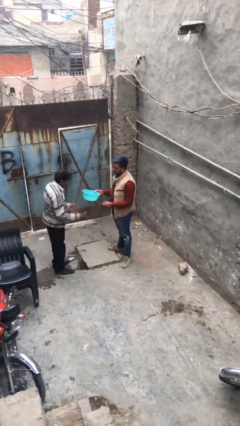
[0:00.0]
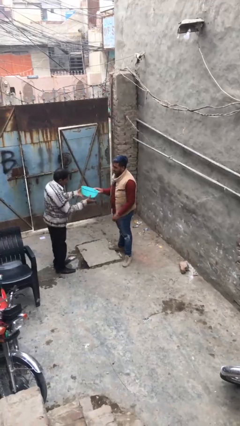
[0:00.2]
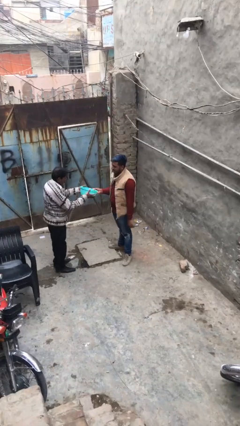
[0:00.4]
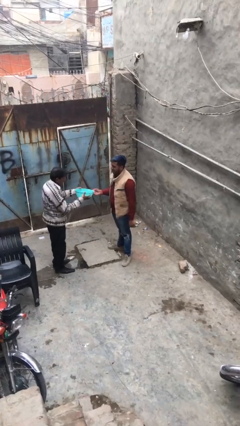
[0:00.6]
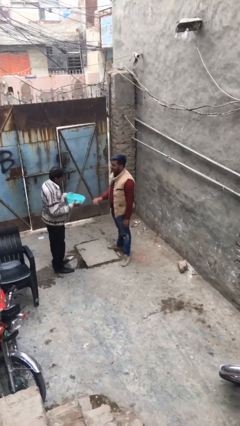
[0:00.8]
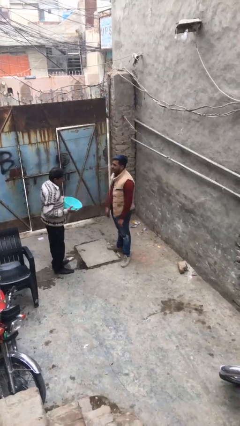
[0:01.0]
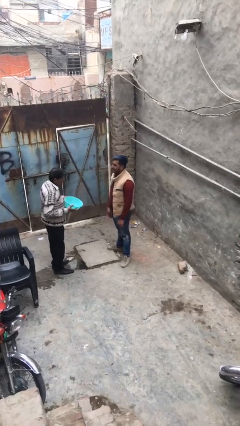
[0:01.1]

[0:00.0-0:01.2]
person transfers object to person

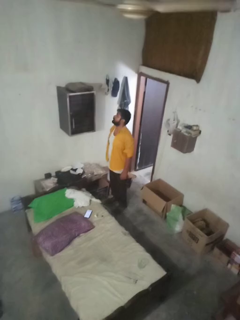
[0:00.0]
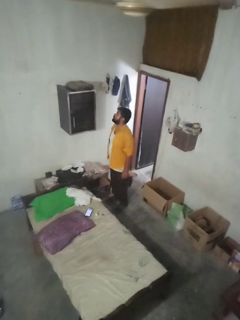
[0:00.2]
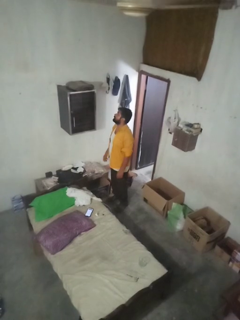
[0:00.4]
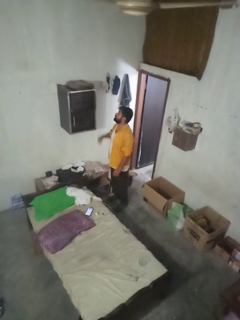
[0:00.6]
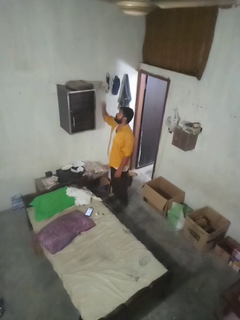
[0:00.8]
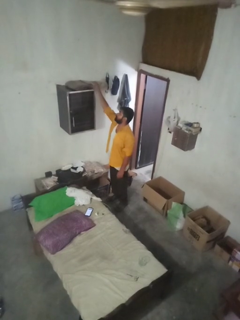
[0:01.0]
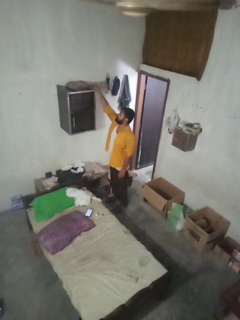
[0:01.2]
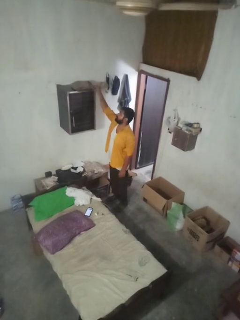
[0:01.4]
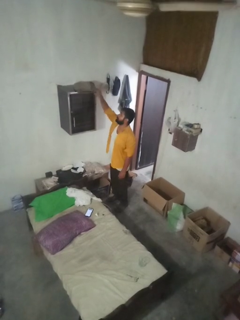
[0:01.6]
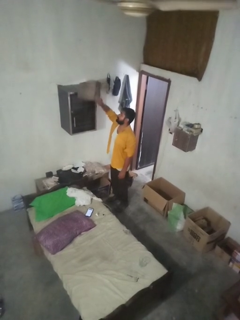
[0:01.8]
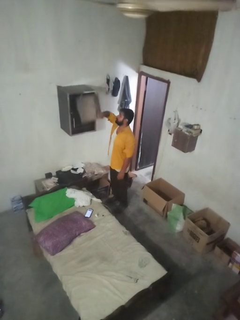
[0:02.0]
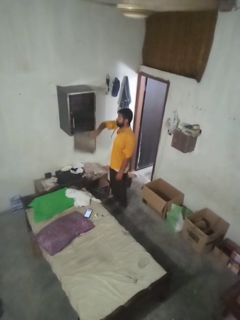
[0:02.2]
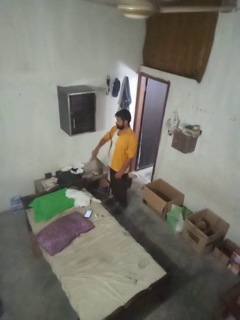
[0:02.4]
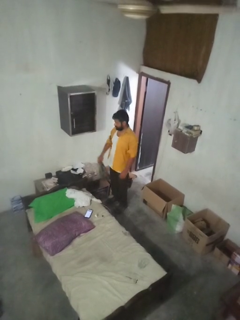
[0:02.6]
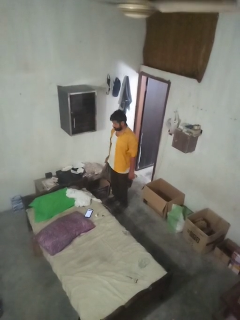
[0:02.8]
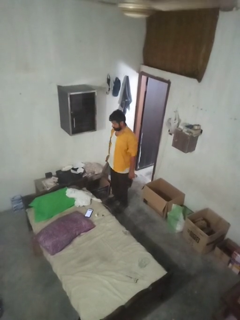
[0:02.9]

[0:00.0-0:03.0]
person picks up object from shelf

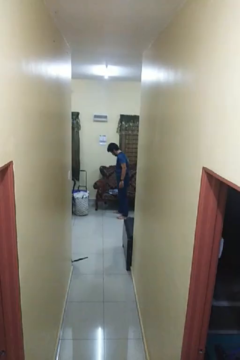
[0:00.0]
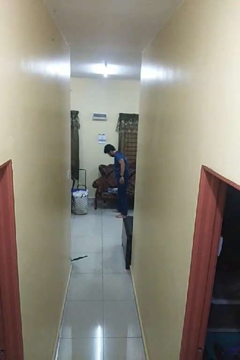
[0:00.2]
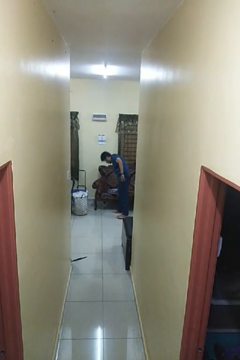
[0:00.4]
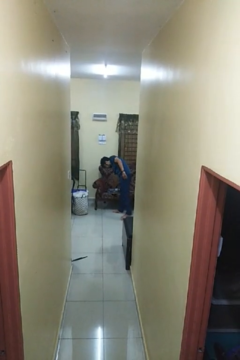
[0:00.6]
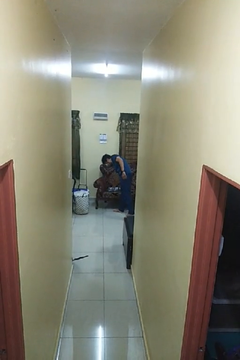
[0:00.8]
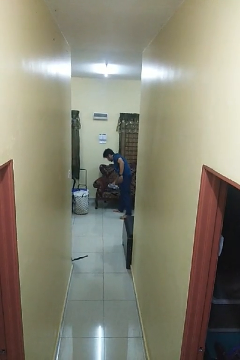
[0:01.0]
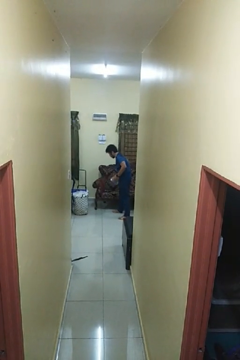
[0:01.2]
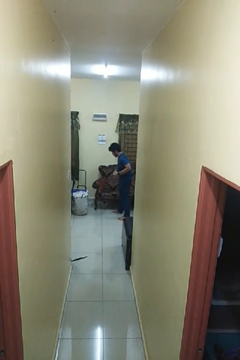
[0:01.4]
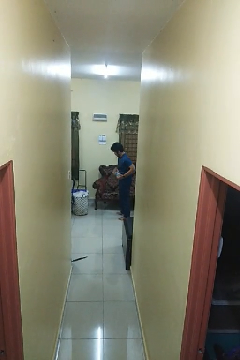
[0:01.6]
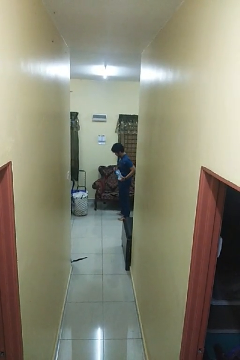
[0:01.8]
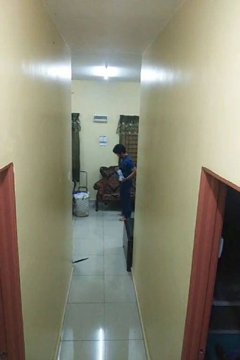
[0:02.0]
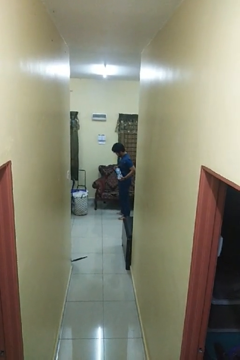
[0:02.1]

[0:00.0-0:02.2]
person picks up object from couch

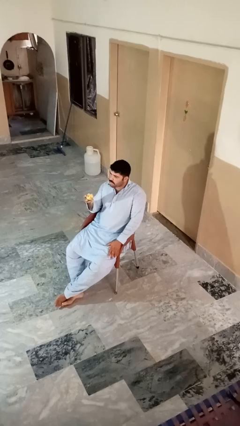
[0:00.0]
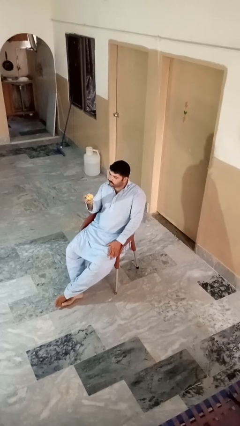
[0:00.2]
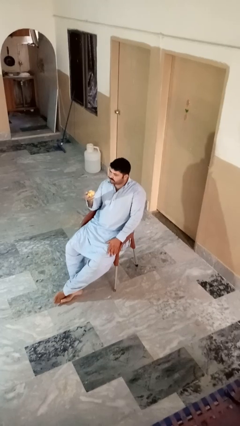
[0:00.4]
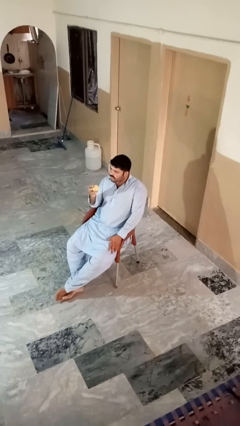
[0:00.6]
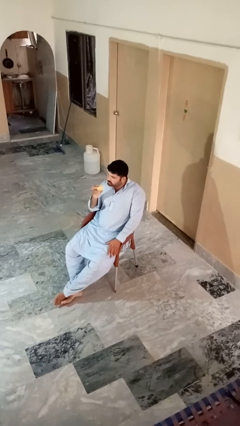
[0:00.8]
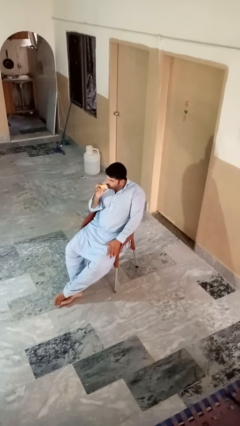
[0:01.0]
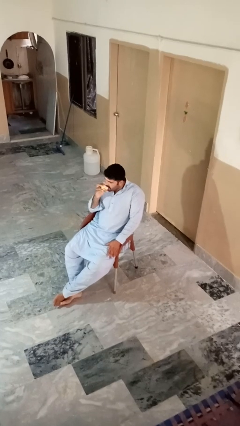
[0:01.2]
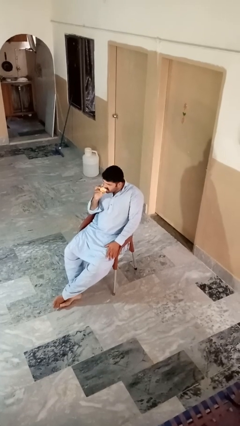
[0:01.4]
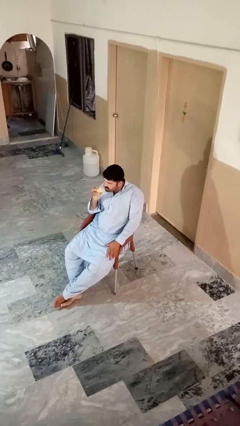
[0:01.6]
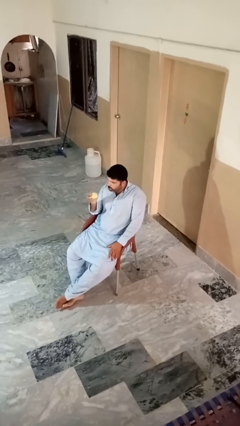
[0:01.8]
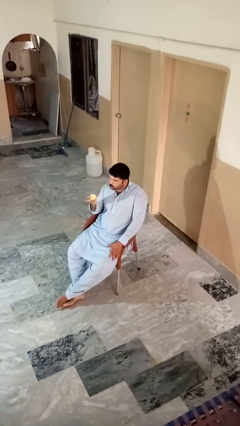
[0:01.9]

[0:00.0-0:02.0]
person eats apple

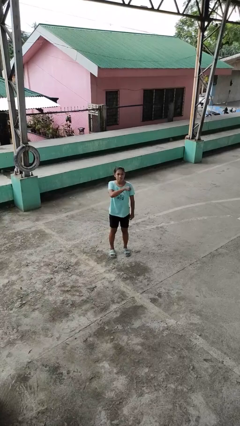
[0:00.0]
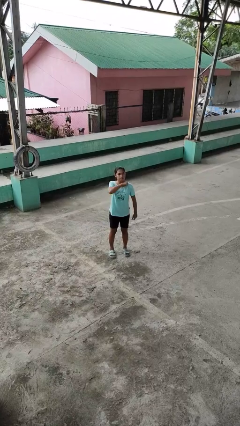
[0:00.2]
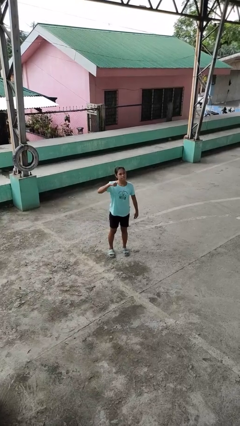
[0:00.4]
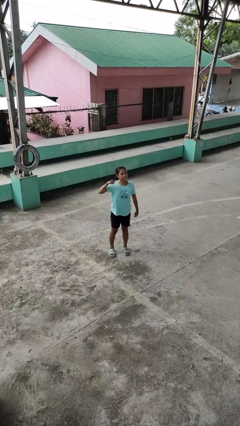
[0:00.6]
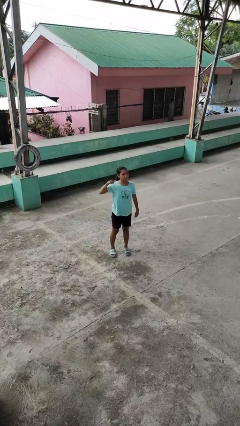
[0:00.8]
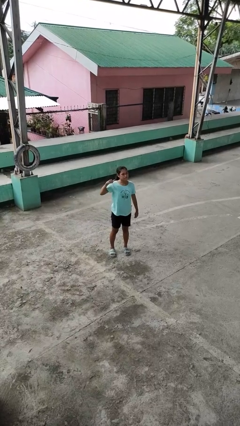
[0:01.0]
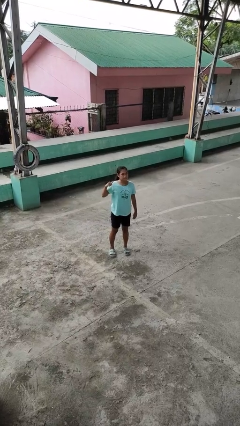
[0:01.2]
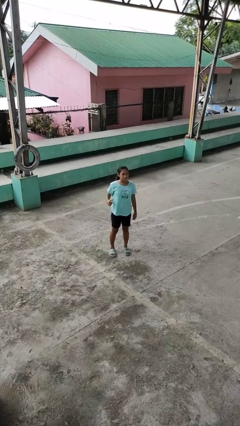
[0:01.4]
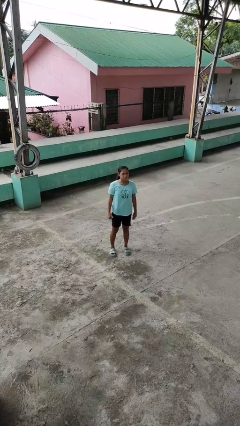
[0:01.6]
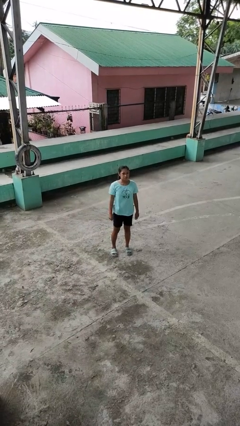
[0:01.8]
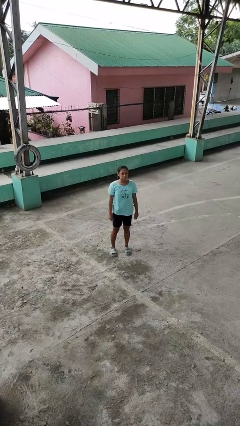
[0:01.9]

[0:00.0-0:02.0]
person gestures cut

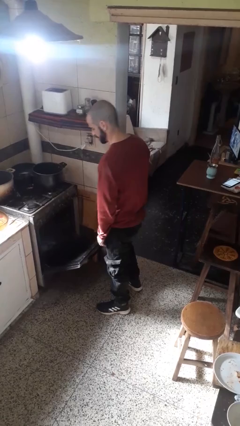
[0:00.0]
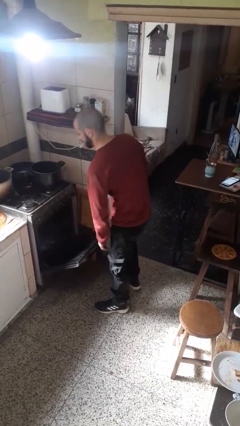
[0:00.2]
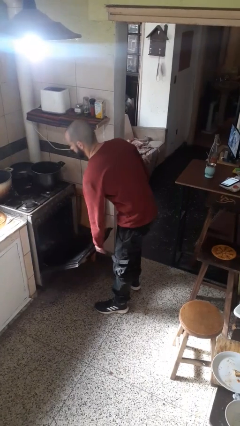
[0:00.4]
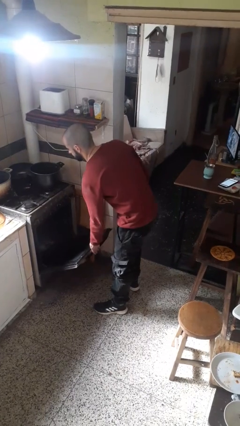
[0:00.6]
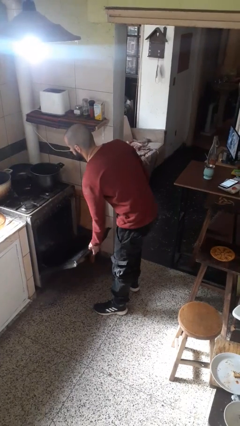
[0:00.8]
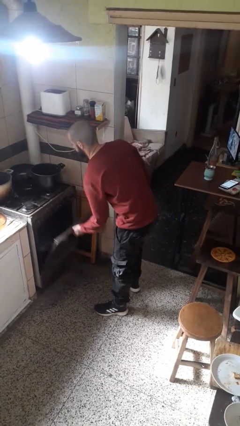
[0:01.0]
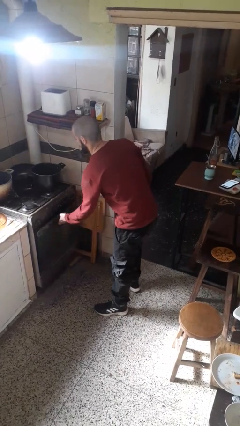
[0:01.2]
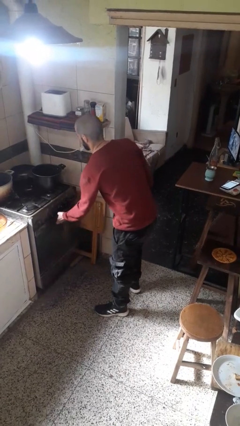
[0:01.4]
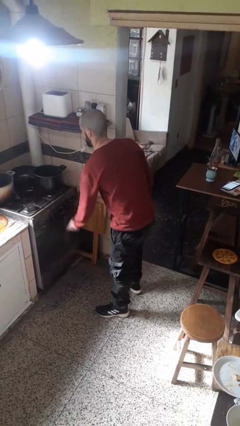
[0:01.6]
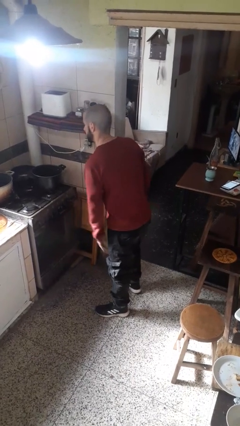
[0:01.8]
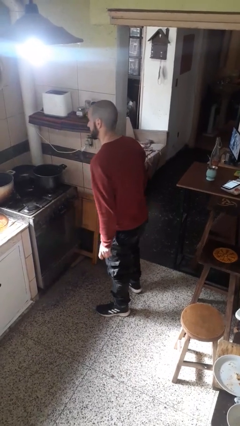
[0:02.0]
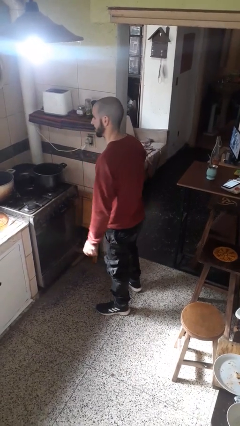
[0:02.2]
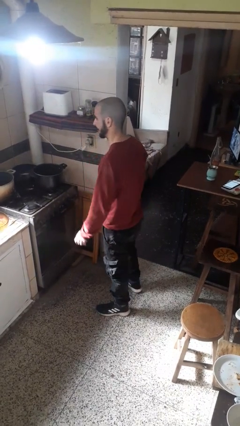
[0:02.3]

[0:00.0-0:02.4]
person closes oven door

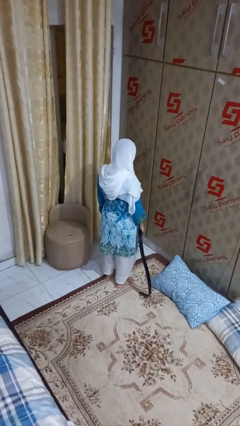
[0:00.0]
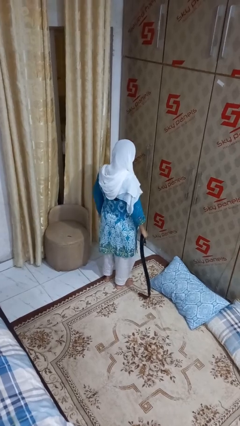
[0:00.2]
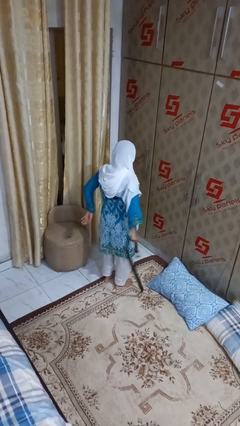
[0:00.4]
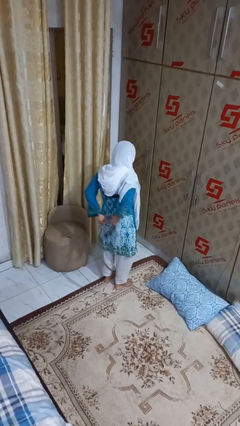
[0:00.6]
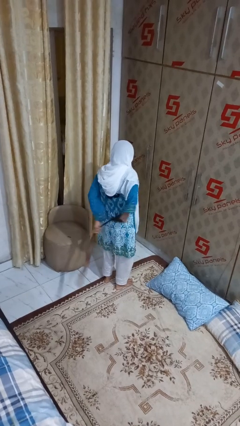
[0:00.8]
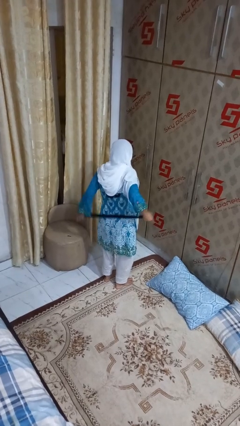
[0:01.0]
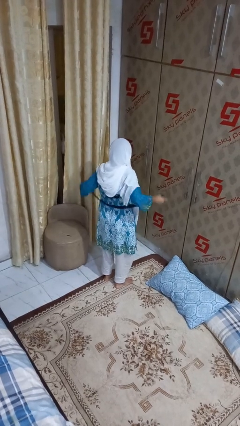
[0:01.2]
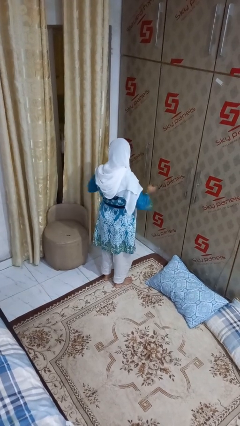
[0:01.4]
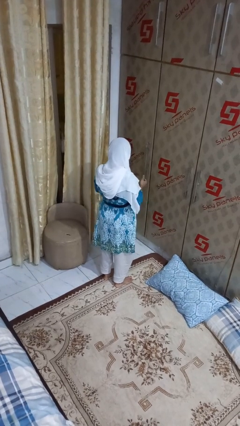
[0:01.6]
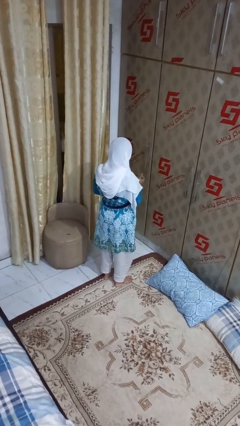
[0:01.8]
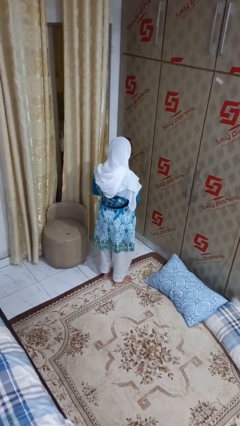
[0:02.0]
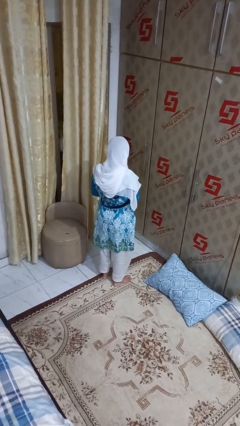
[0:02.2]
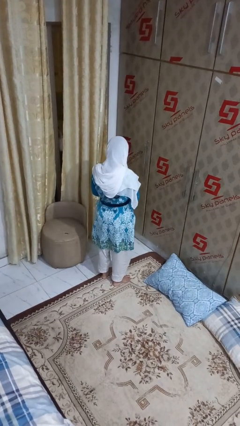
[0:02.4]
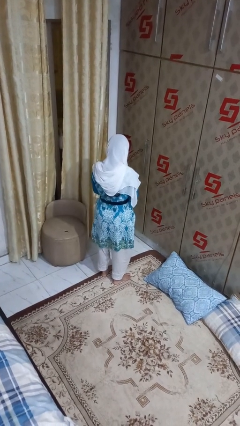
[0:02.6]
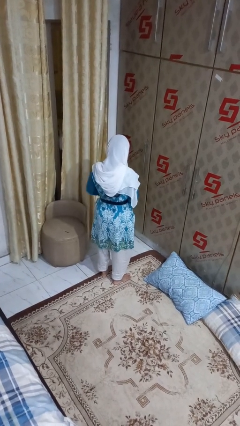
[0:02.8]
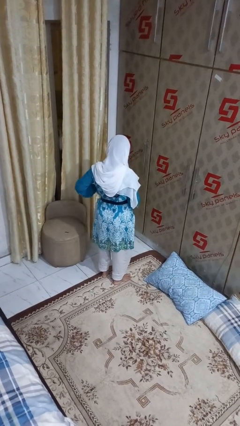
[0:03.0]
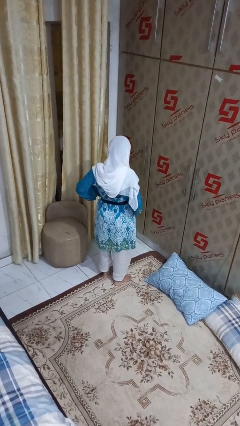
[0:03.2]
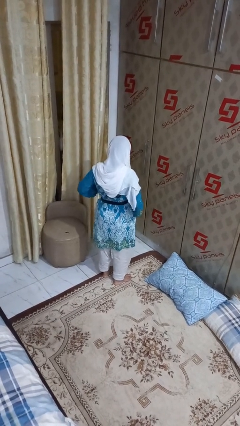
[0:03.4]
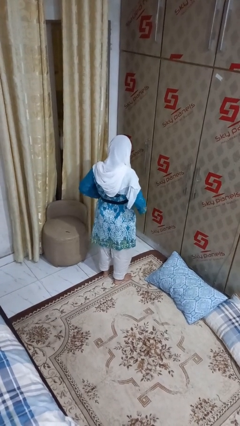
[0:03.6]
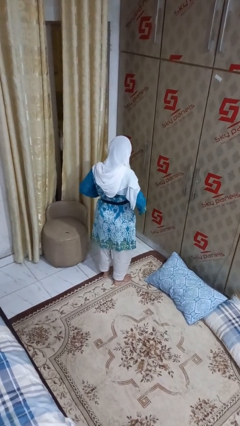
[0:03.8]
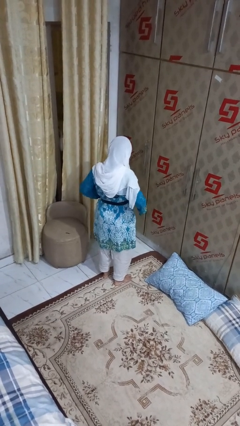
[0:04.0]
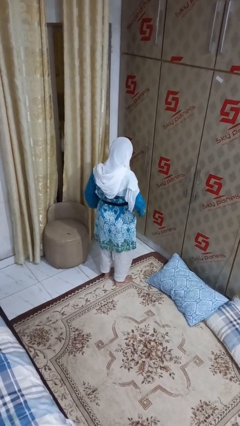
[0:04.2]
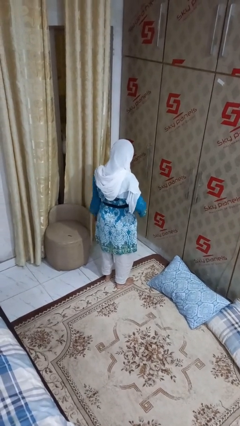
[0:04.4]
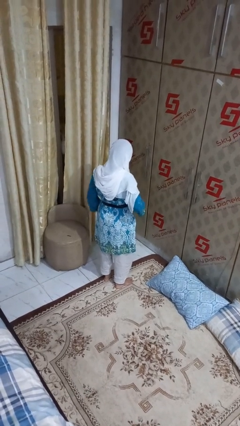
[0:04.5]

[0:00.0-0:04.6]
person puts on belt

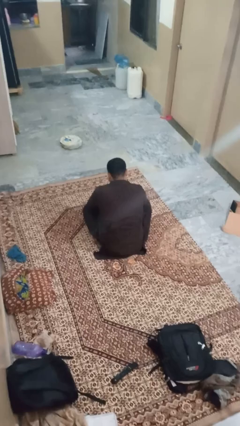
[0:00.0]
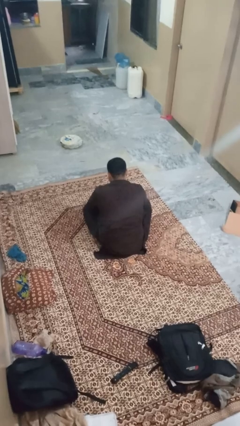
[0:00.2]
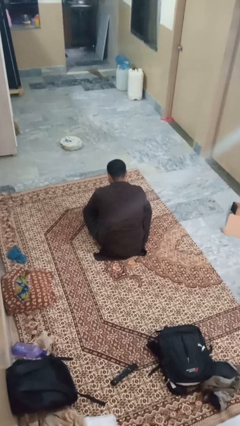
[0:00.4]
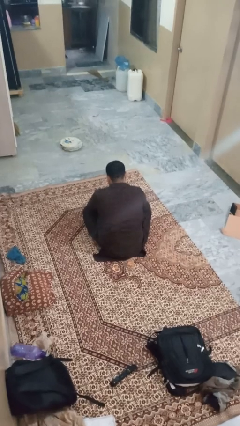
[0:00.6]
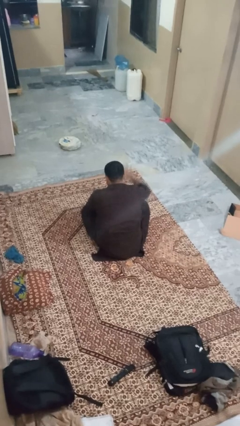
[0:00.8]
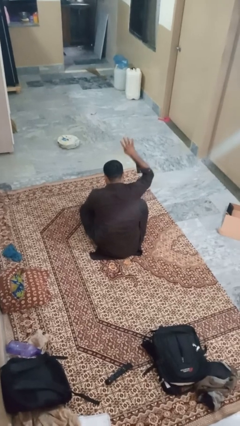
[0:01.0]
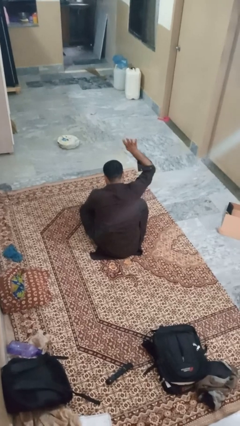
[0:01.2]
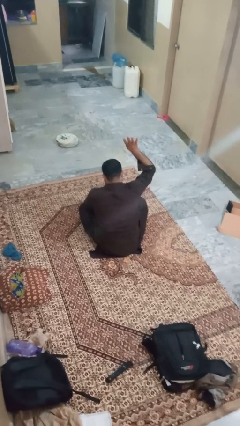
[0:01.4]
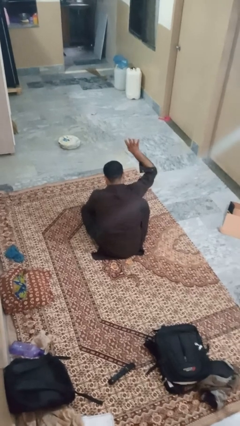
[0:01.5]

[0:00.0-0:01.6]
person gestures number four
